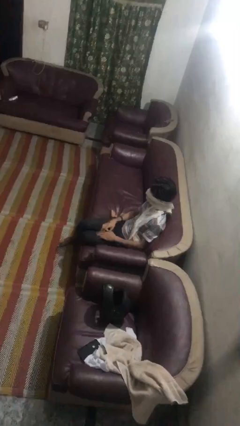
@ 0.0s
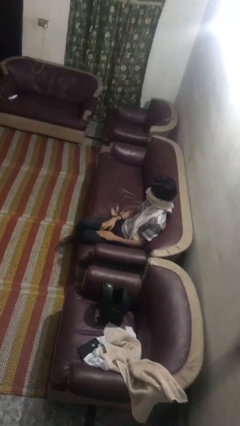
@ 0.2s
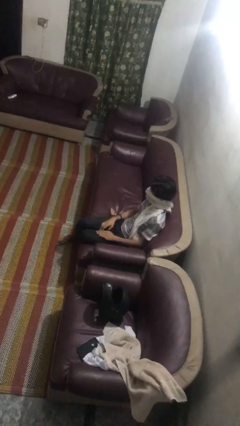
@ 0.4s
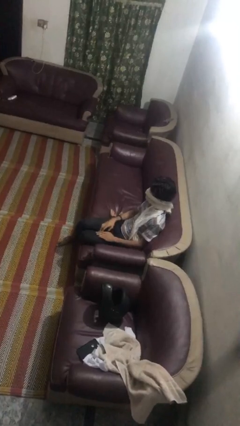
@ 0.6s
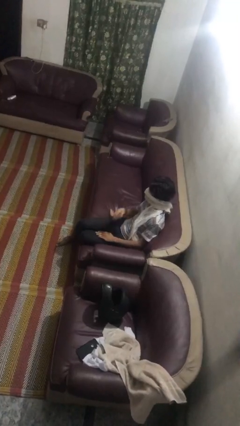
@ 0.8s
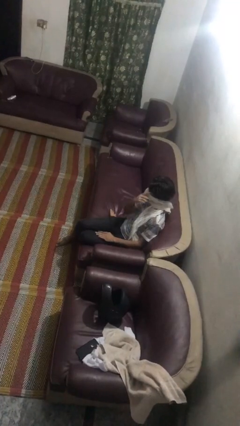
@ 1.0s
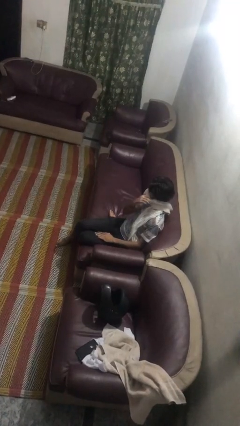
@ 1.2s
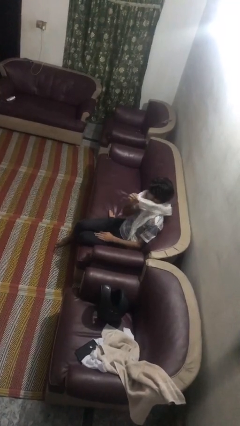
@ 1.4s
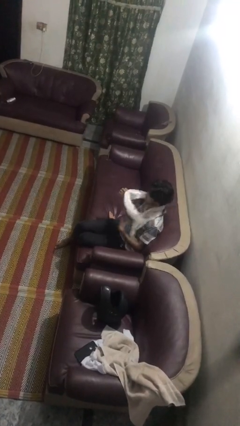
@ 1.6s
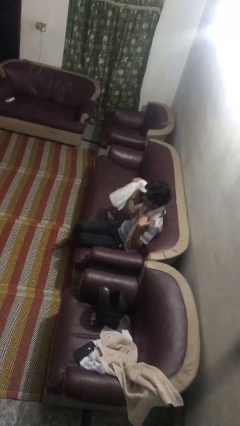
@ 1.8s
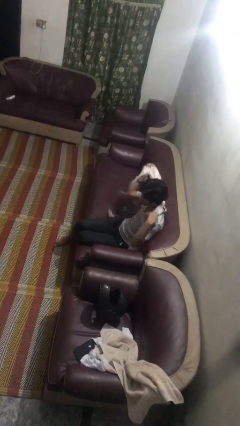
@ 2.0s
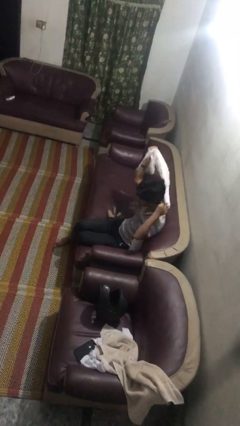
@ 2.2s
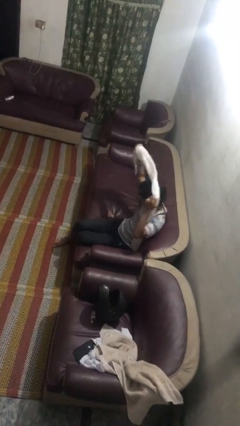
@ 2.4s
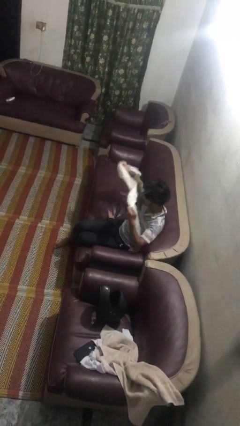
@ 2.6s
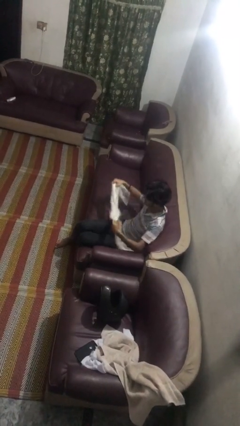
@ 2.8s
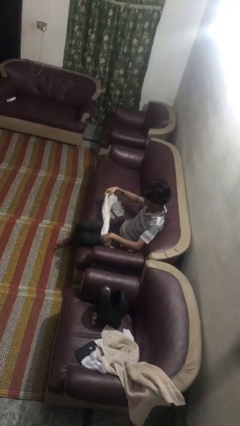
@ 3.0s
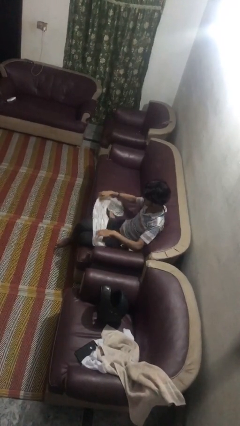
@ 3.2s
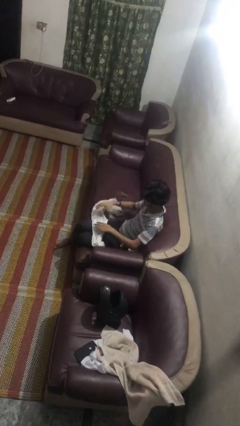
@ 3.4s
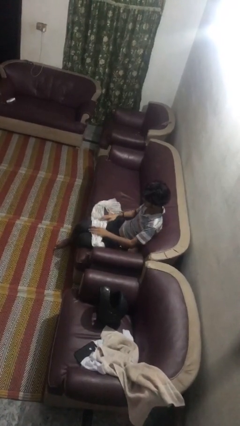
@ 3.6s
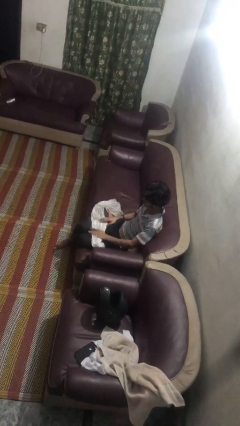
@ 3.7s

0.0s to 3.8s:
person takes off scarf

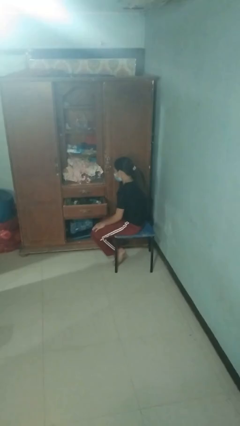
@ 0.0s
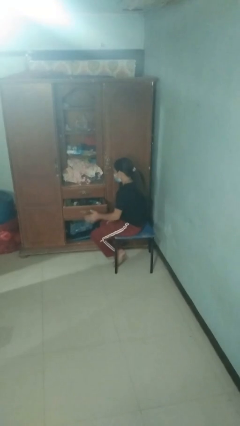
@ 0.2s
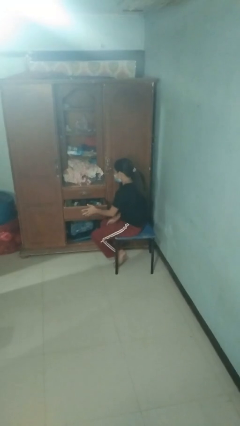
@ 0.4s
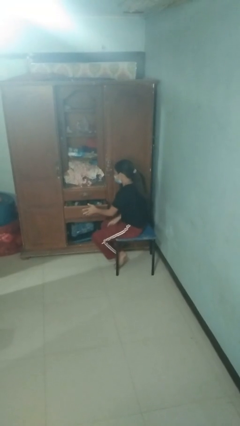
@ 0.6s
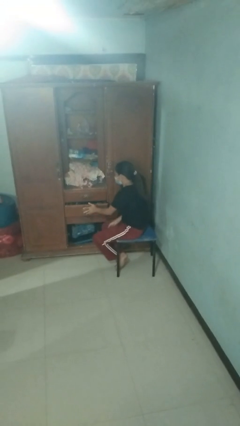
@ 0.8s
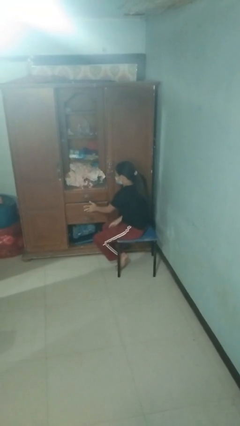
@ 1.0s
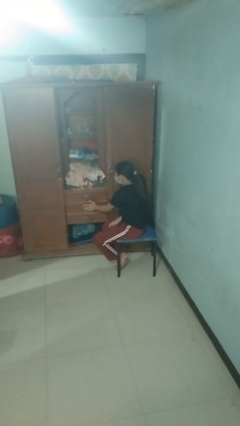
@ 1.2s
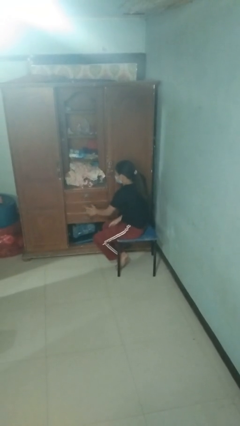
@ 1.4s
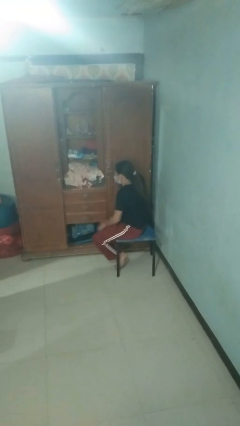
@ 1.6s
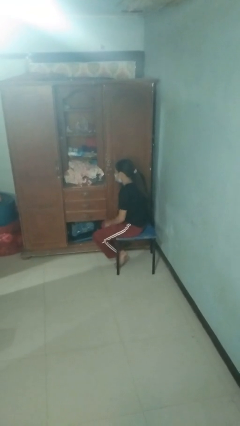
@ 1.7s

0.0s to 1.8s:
person closes dresser drawer

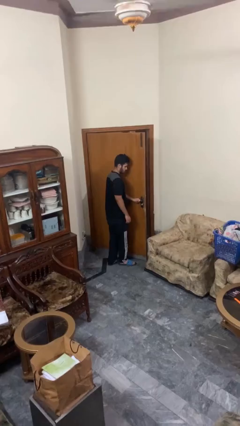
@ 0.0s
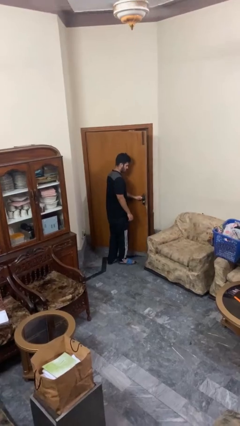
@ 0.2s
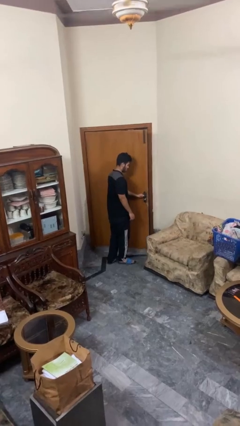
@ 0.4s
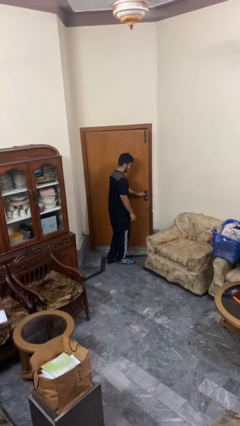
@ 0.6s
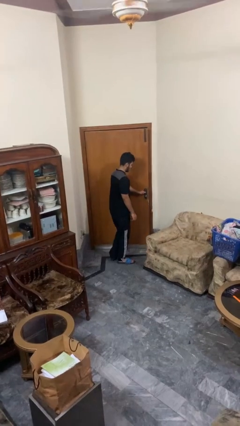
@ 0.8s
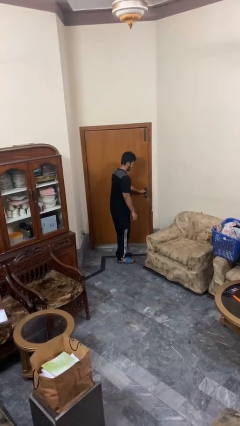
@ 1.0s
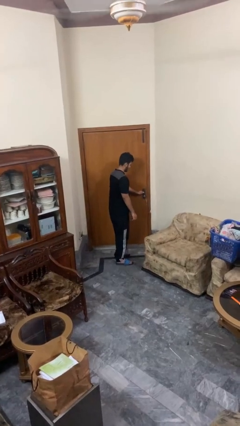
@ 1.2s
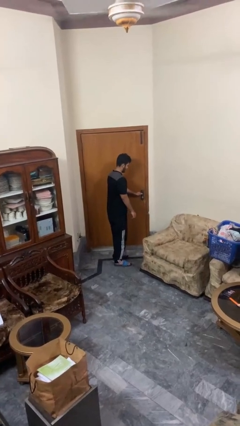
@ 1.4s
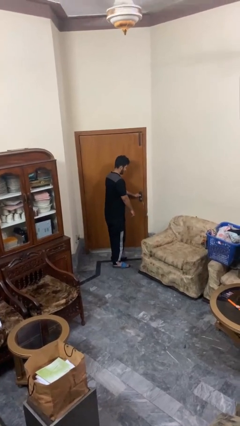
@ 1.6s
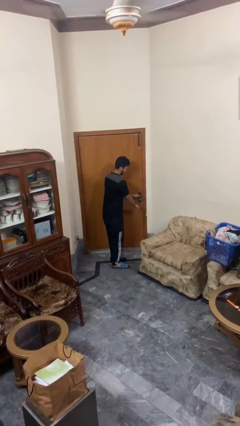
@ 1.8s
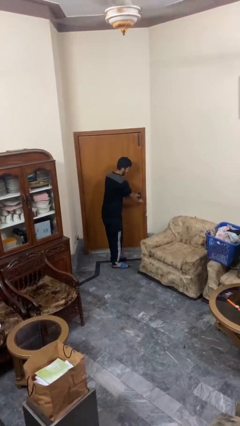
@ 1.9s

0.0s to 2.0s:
person closes facility door

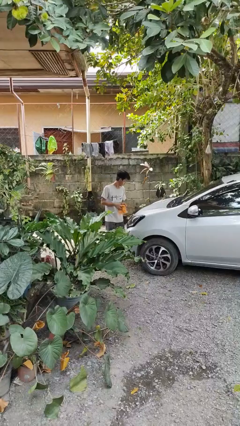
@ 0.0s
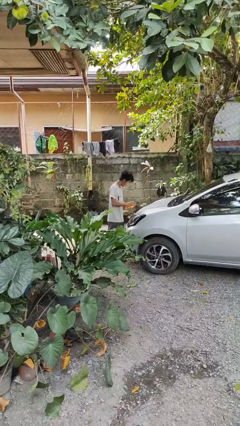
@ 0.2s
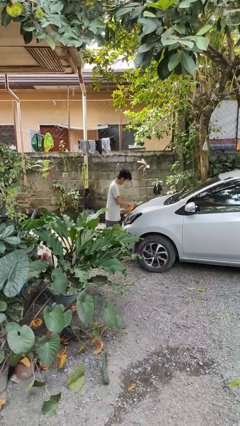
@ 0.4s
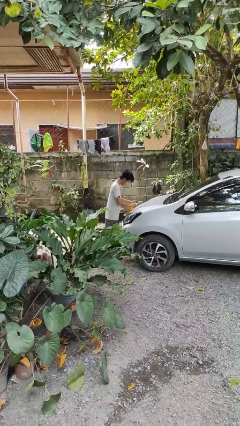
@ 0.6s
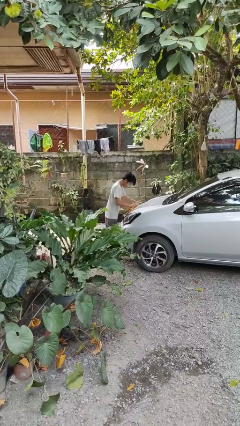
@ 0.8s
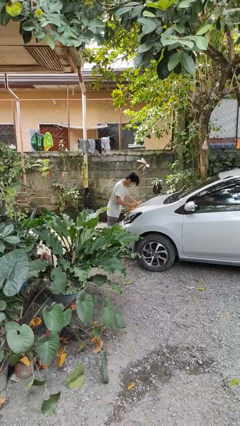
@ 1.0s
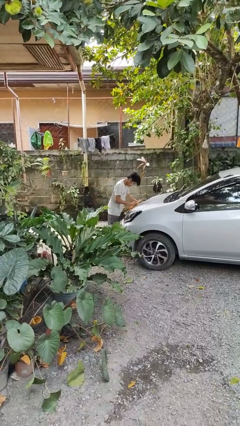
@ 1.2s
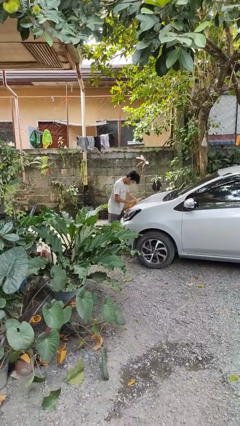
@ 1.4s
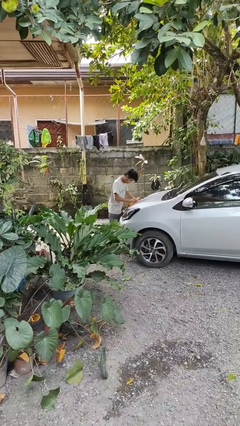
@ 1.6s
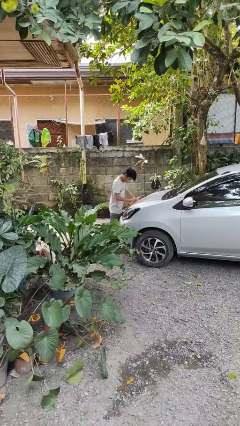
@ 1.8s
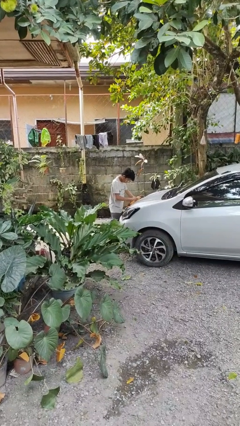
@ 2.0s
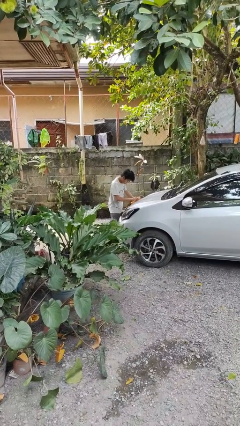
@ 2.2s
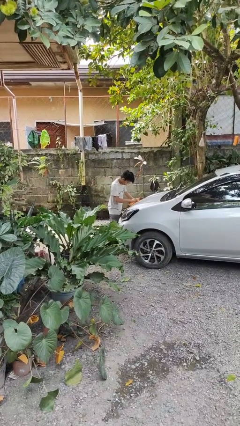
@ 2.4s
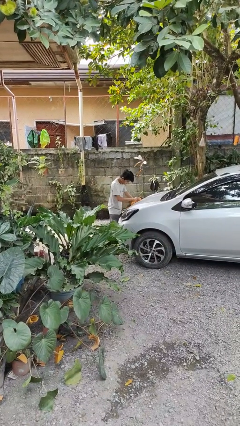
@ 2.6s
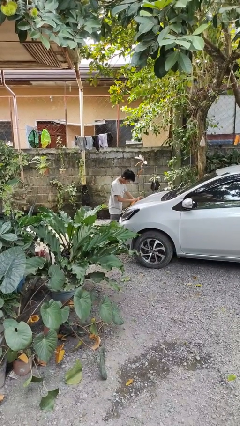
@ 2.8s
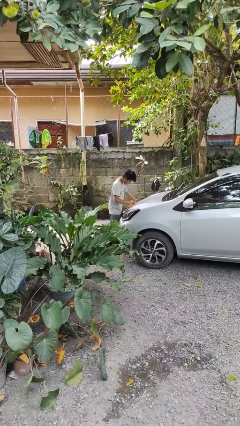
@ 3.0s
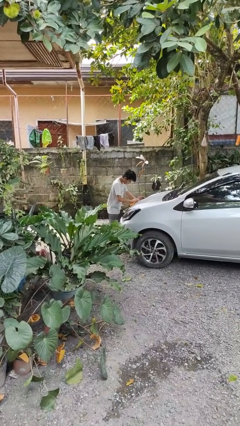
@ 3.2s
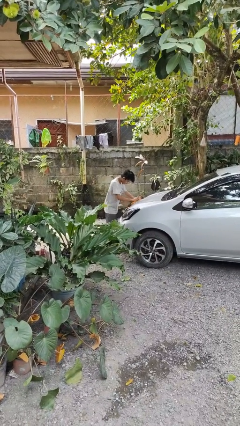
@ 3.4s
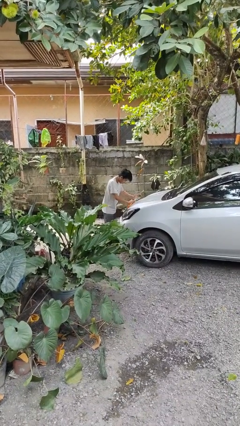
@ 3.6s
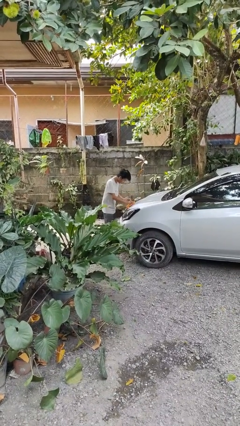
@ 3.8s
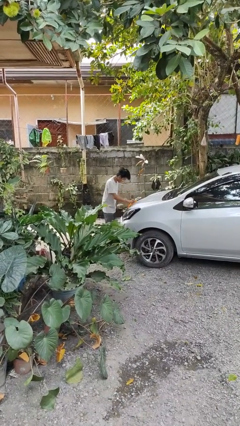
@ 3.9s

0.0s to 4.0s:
person polishes car with rag

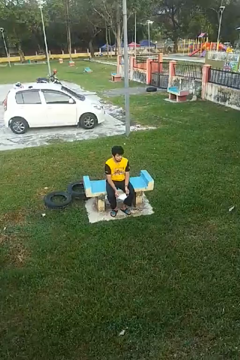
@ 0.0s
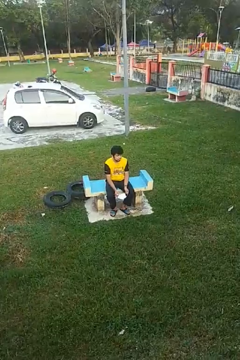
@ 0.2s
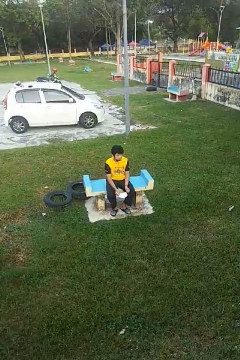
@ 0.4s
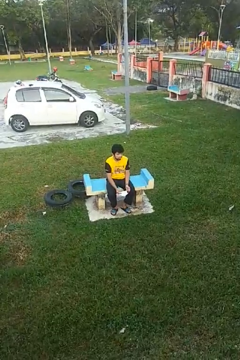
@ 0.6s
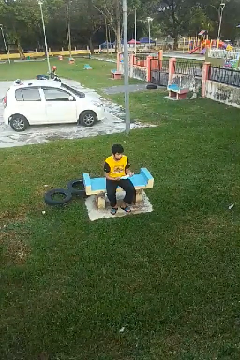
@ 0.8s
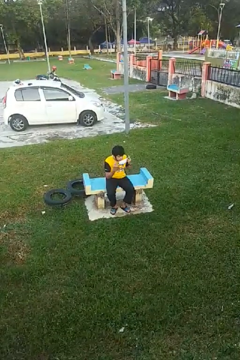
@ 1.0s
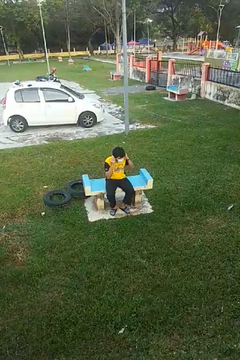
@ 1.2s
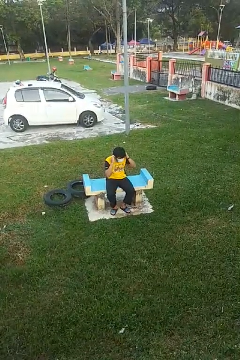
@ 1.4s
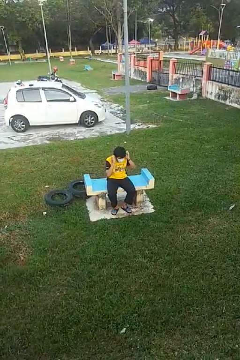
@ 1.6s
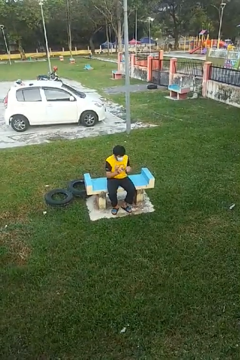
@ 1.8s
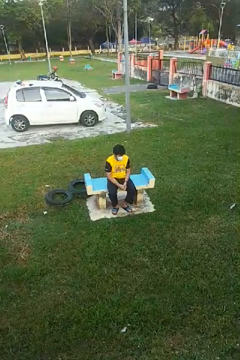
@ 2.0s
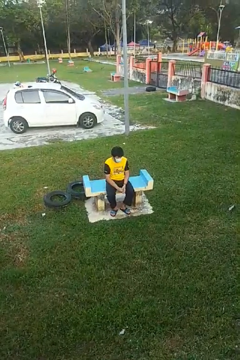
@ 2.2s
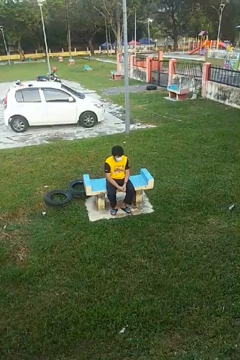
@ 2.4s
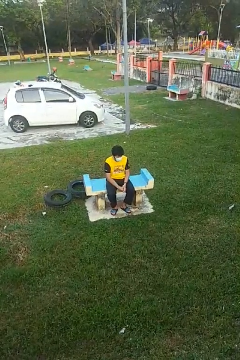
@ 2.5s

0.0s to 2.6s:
person puts on facemask

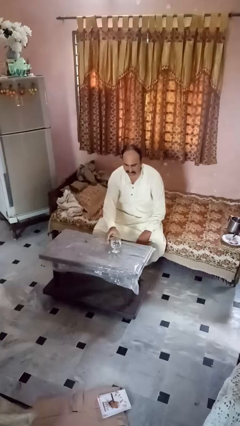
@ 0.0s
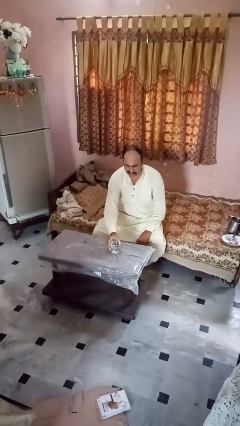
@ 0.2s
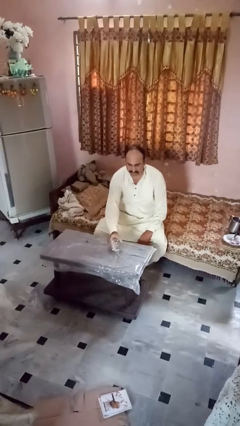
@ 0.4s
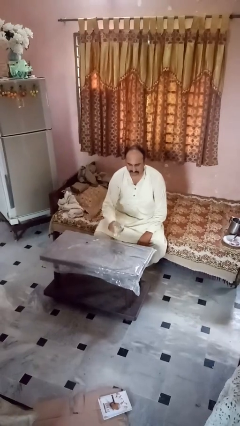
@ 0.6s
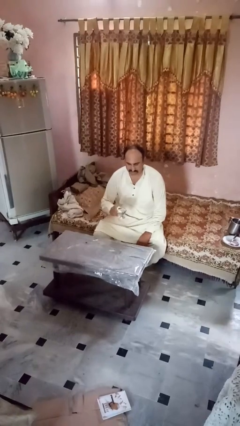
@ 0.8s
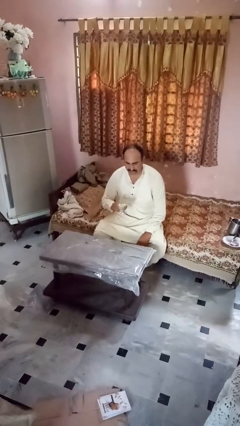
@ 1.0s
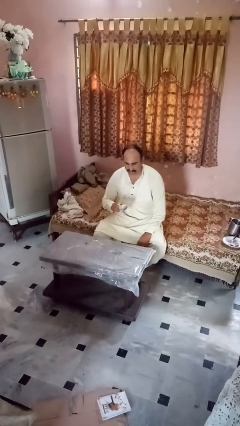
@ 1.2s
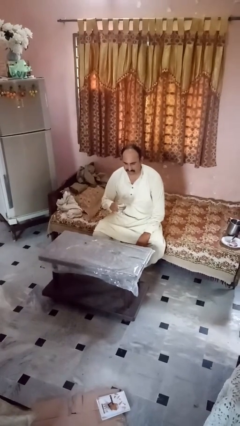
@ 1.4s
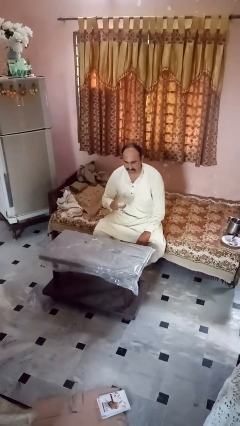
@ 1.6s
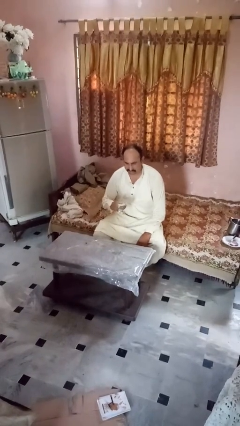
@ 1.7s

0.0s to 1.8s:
person picks up object from table

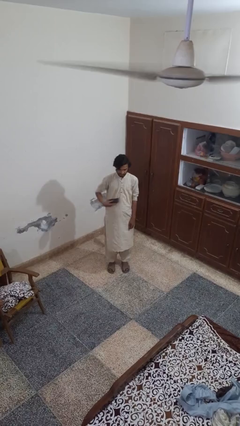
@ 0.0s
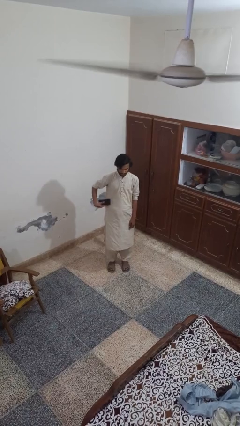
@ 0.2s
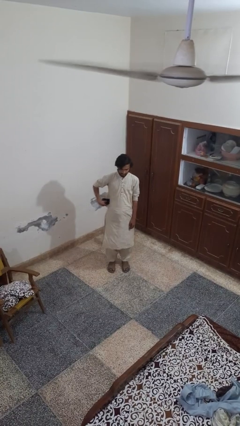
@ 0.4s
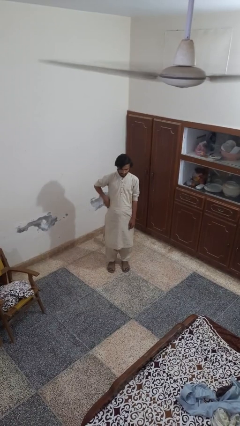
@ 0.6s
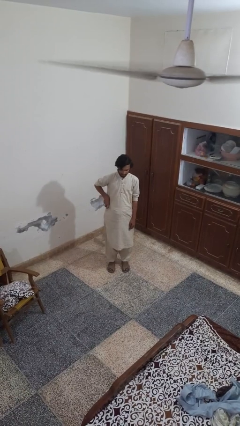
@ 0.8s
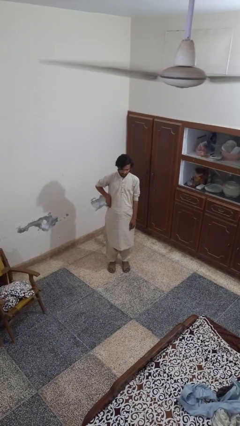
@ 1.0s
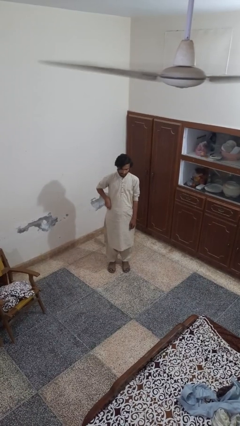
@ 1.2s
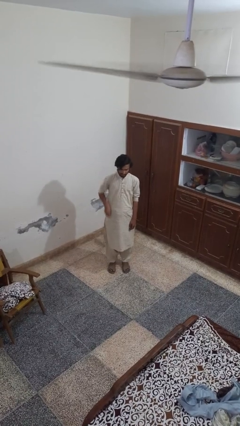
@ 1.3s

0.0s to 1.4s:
person puts phone into pocket

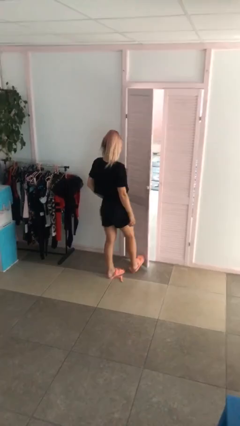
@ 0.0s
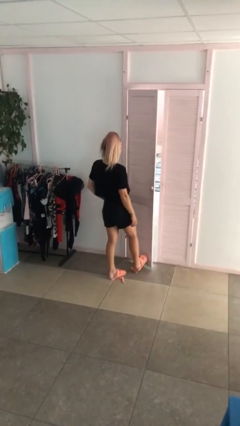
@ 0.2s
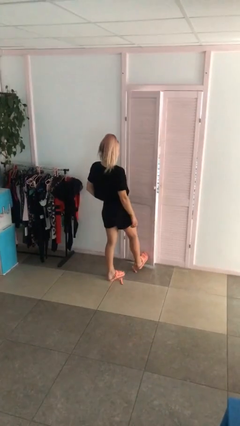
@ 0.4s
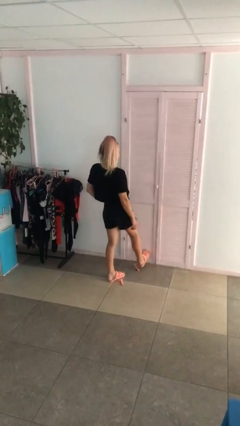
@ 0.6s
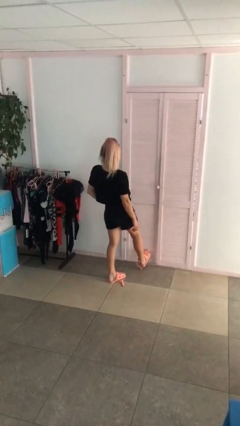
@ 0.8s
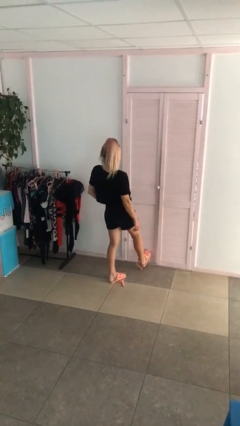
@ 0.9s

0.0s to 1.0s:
person closes door with foot
